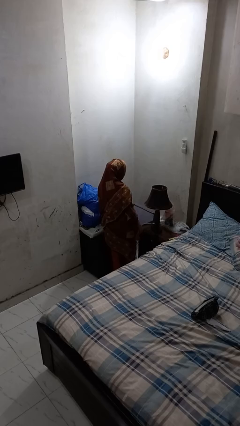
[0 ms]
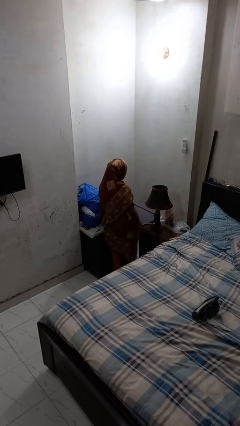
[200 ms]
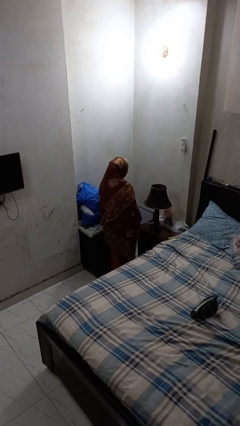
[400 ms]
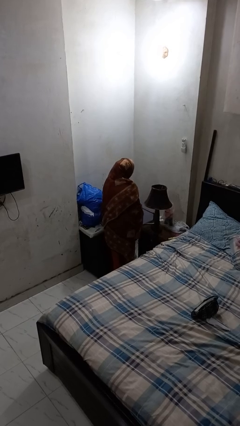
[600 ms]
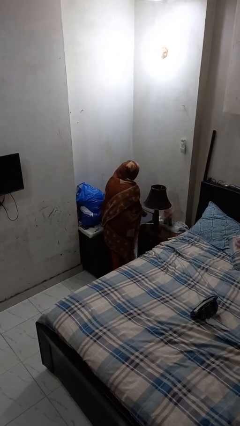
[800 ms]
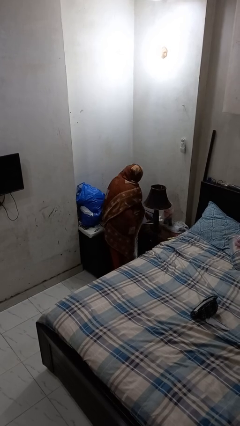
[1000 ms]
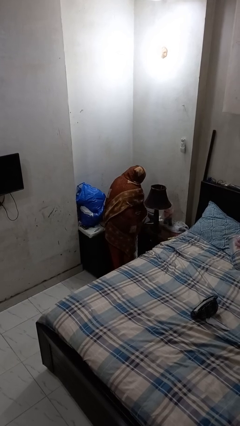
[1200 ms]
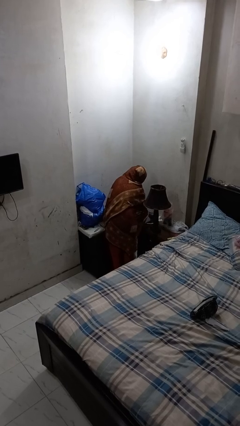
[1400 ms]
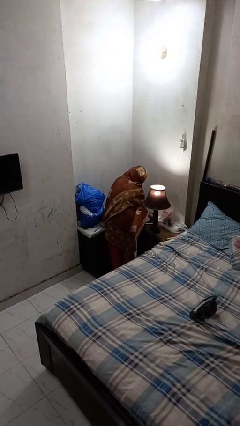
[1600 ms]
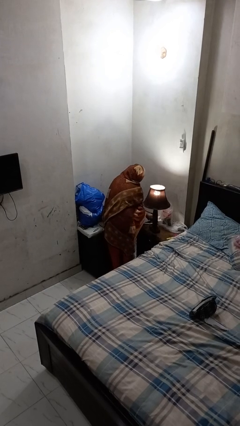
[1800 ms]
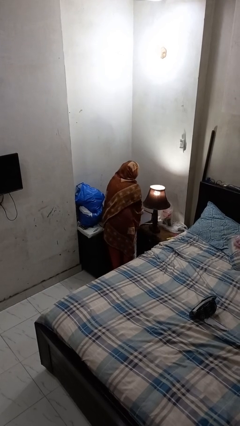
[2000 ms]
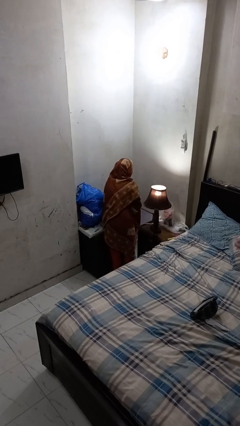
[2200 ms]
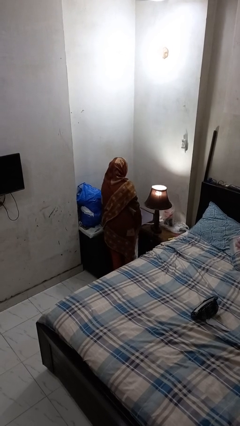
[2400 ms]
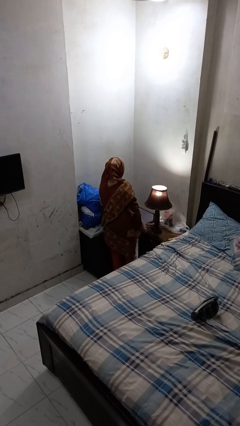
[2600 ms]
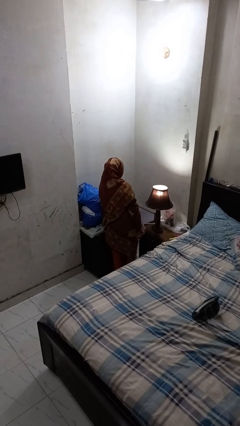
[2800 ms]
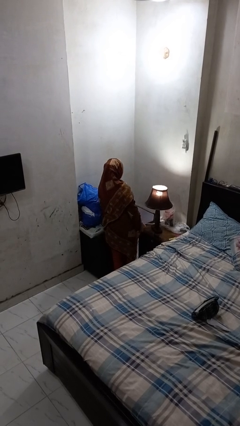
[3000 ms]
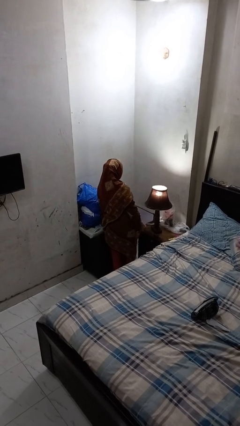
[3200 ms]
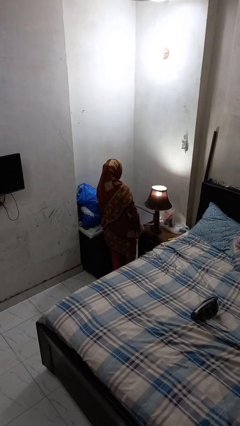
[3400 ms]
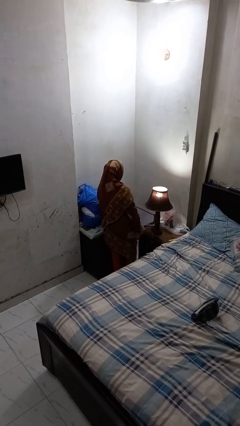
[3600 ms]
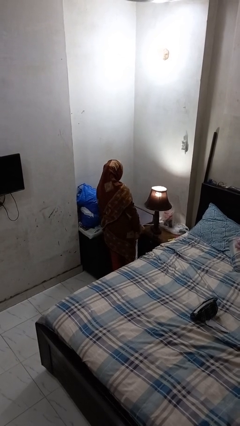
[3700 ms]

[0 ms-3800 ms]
person turns on lamp

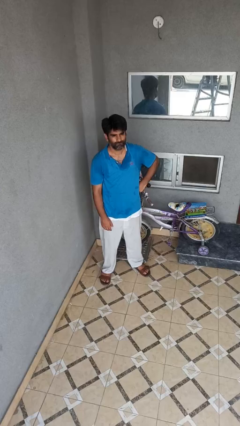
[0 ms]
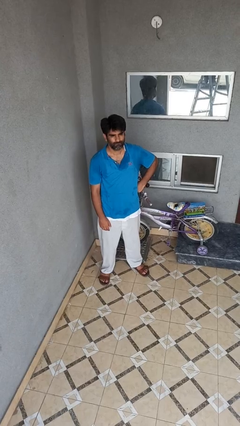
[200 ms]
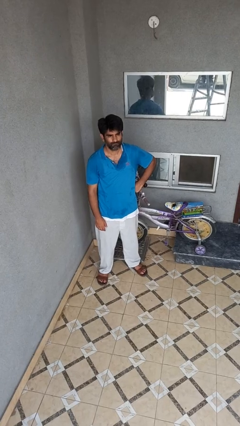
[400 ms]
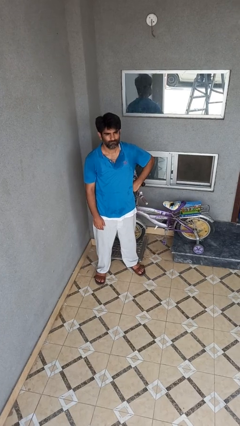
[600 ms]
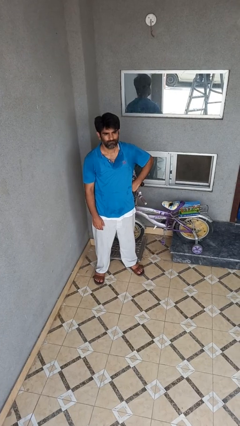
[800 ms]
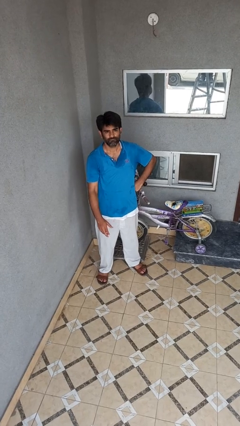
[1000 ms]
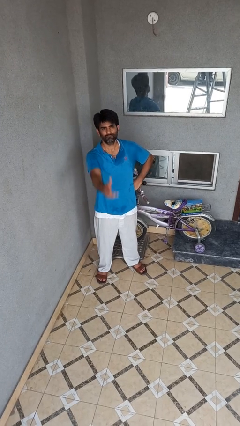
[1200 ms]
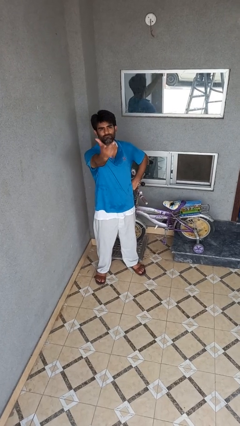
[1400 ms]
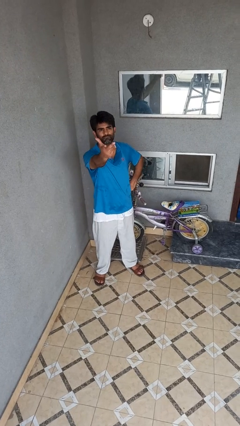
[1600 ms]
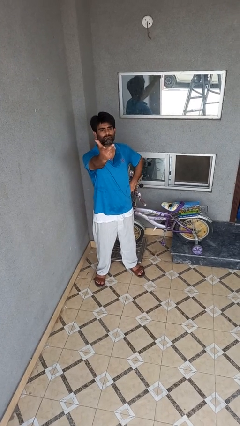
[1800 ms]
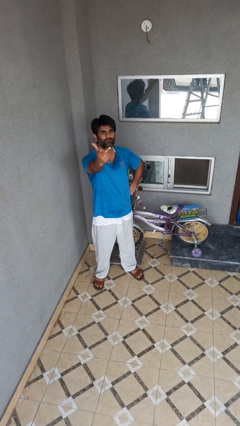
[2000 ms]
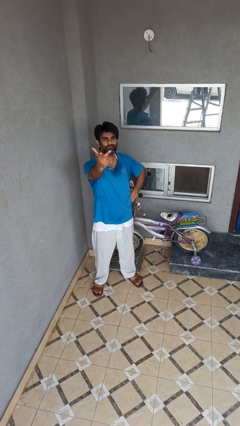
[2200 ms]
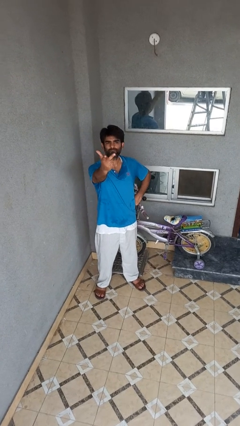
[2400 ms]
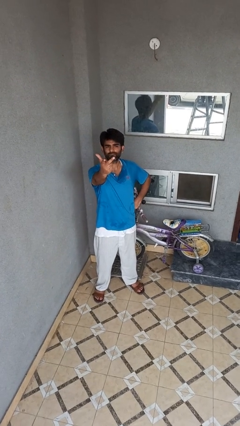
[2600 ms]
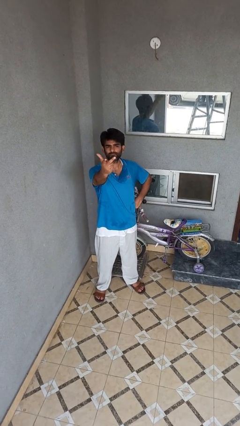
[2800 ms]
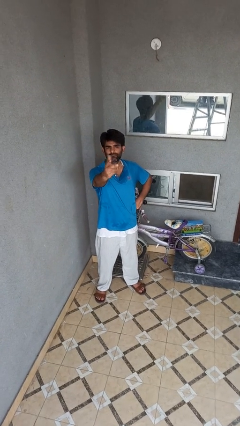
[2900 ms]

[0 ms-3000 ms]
person gestures raise hand

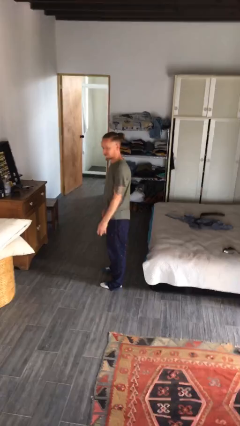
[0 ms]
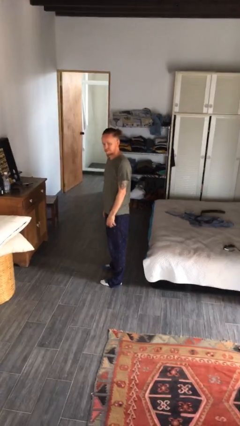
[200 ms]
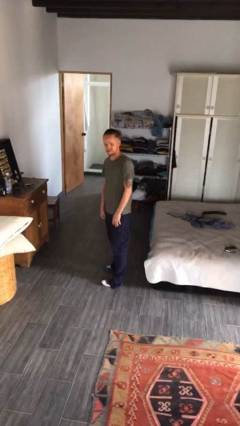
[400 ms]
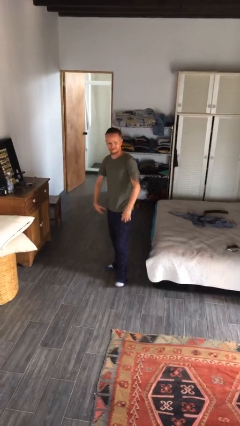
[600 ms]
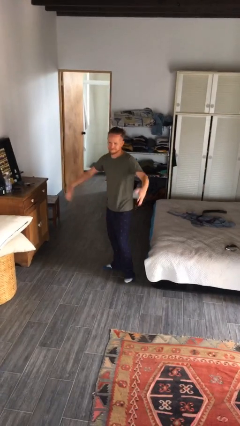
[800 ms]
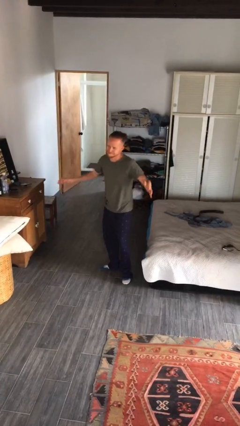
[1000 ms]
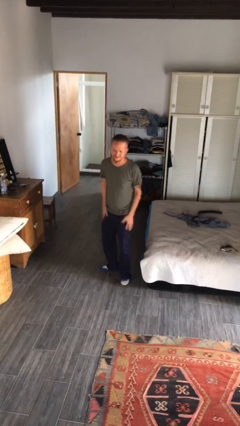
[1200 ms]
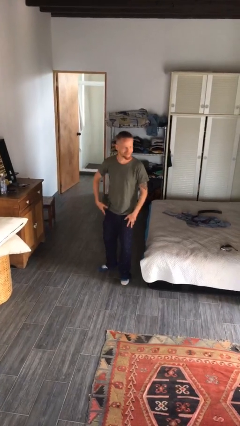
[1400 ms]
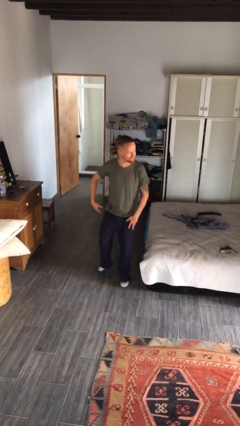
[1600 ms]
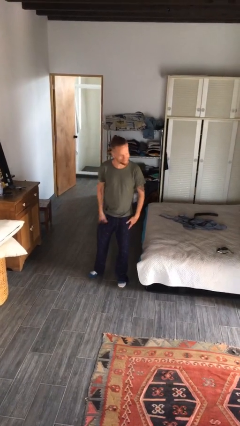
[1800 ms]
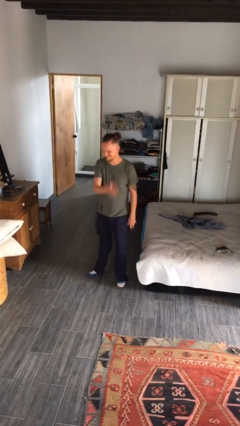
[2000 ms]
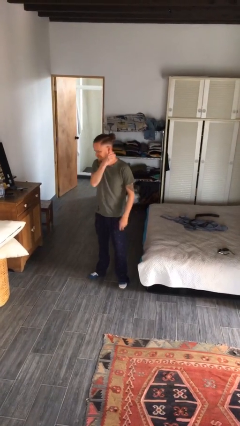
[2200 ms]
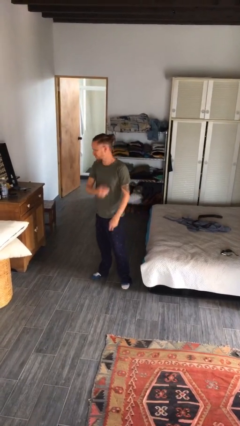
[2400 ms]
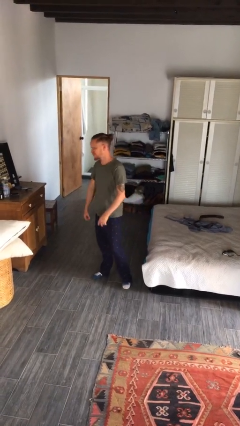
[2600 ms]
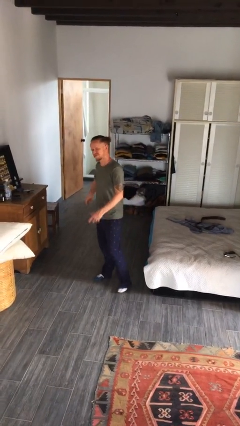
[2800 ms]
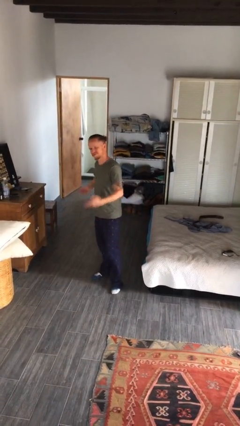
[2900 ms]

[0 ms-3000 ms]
person slaps hands on thighs

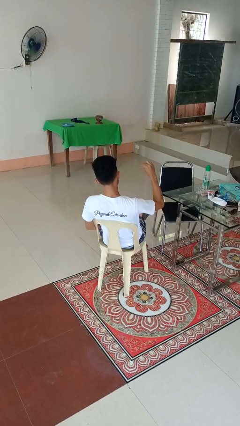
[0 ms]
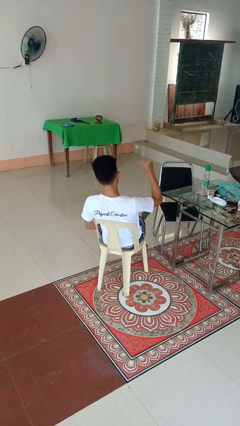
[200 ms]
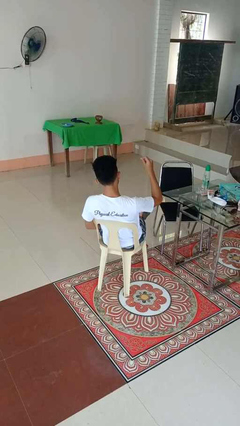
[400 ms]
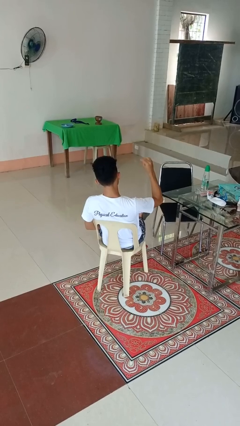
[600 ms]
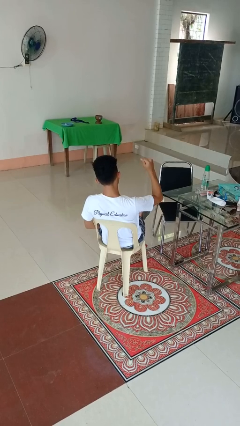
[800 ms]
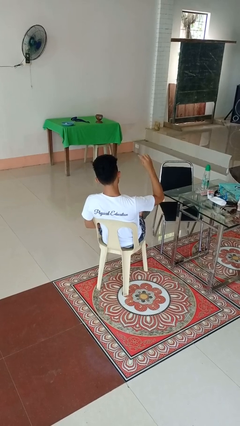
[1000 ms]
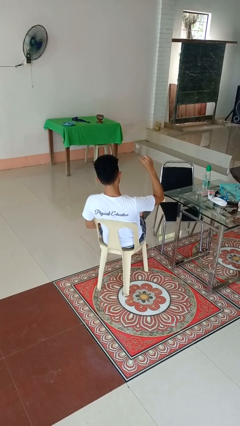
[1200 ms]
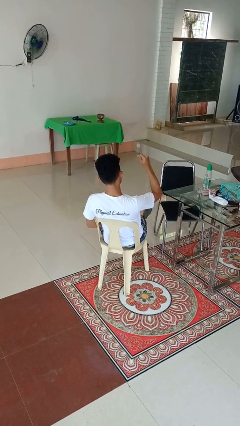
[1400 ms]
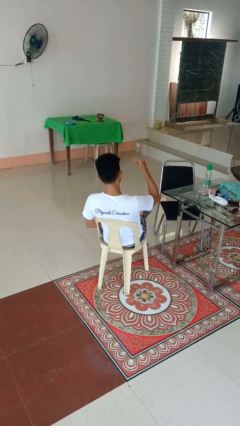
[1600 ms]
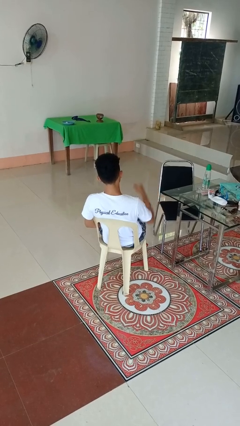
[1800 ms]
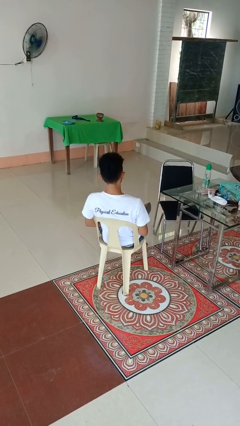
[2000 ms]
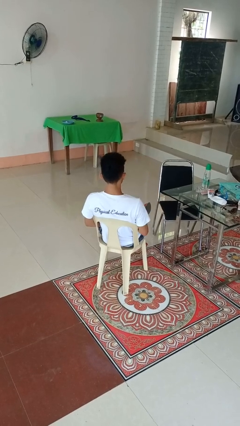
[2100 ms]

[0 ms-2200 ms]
person snaps fingers

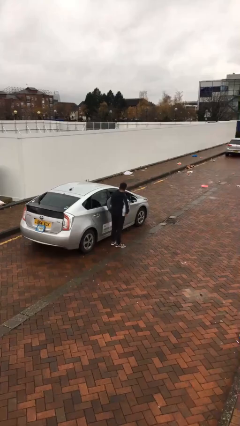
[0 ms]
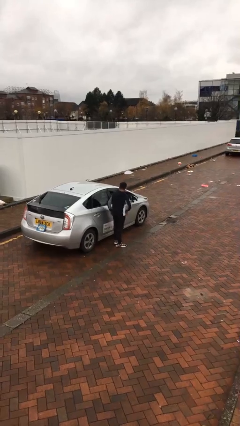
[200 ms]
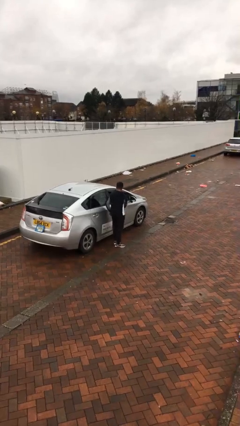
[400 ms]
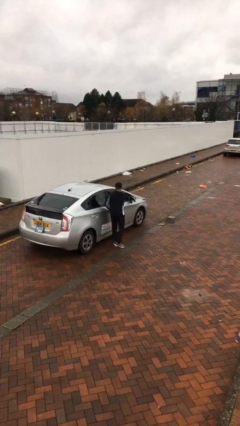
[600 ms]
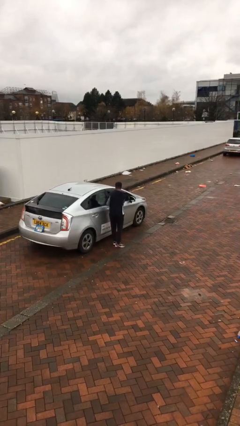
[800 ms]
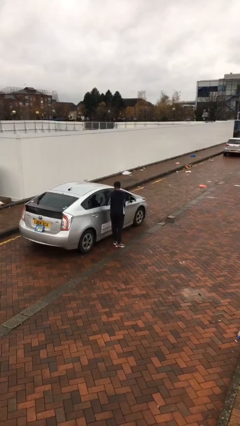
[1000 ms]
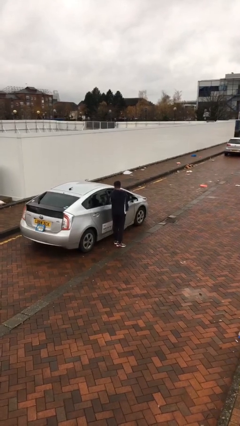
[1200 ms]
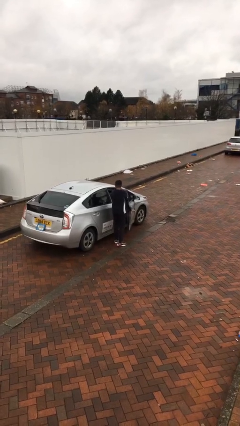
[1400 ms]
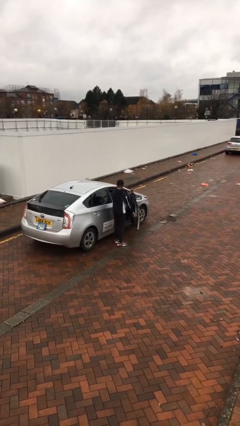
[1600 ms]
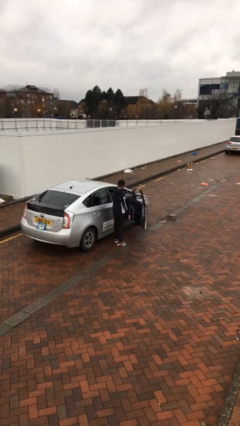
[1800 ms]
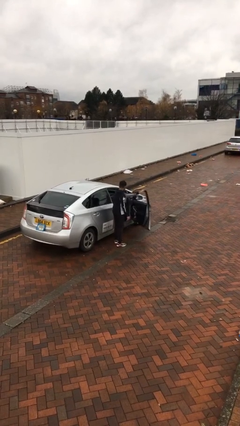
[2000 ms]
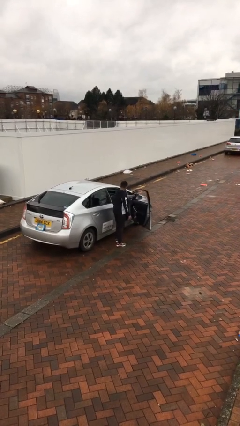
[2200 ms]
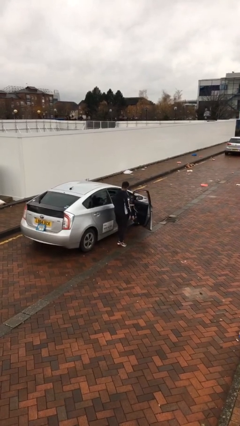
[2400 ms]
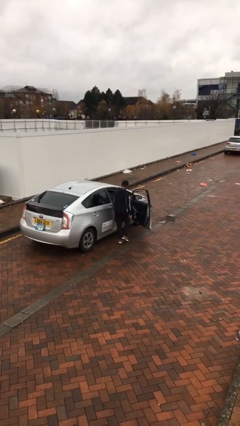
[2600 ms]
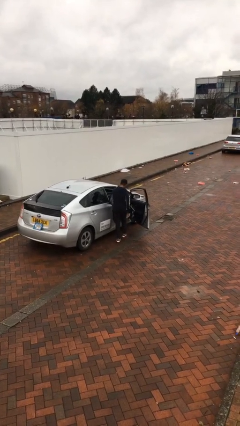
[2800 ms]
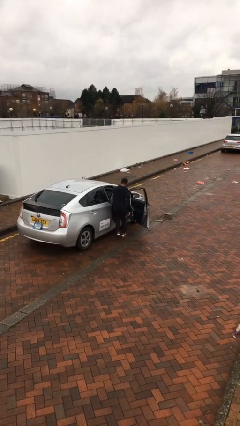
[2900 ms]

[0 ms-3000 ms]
person opens car door

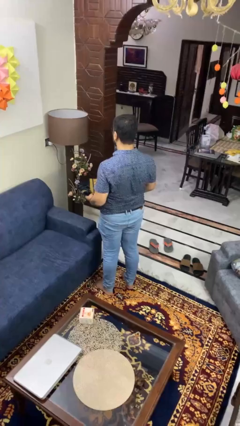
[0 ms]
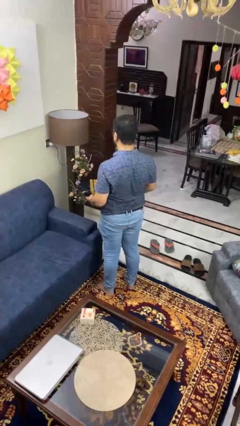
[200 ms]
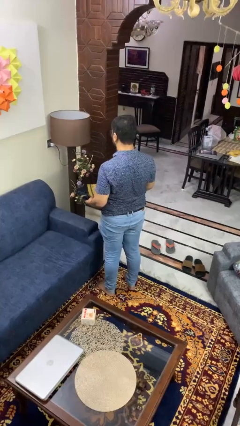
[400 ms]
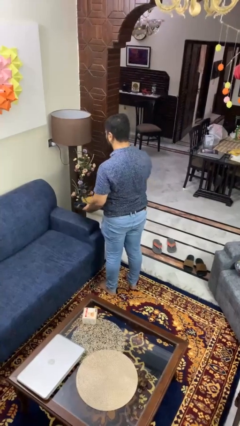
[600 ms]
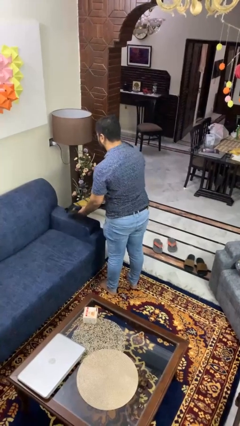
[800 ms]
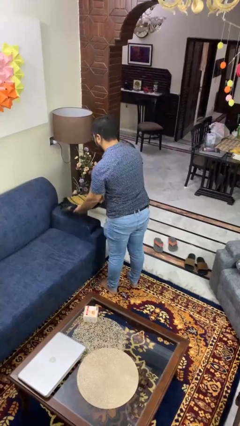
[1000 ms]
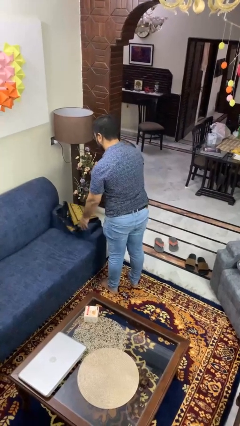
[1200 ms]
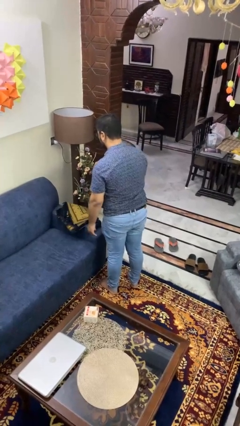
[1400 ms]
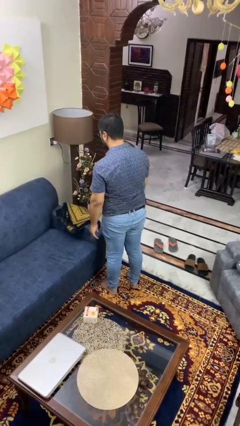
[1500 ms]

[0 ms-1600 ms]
person puts down object on couch

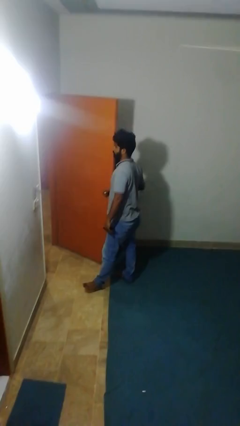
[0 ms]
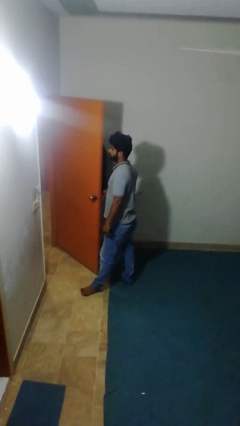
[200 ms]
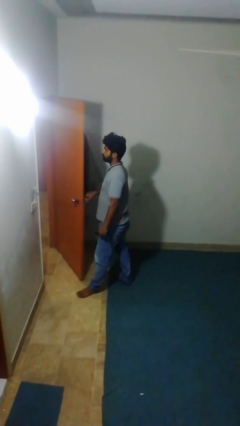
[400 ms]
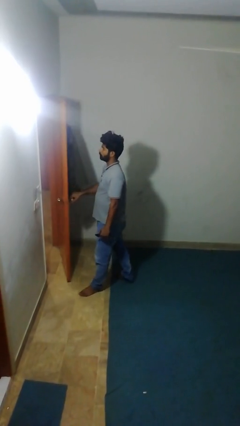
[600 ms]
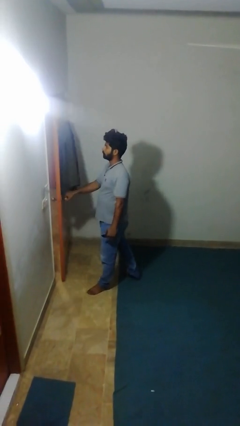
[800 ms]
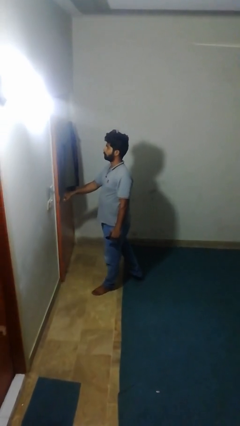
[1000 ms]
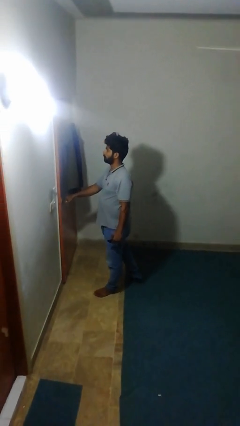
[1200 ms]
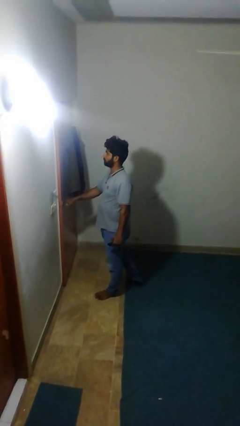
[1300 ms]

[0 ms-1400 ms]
person closes facility door
